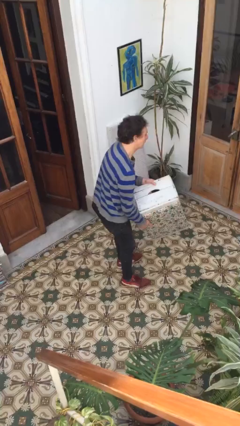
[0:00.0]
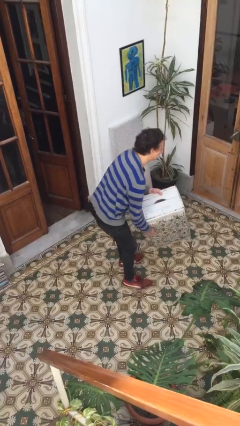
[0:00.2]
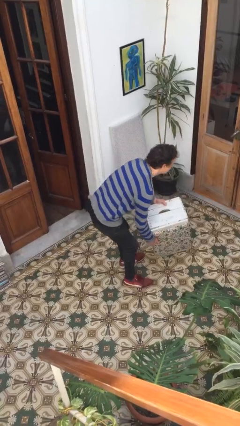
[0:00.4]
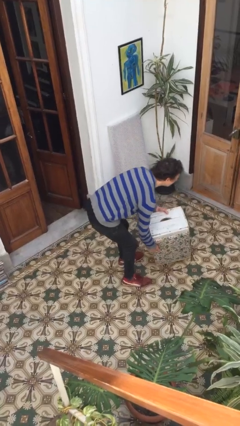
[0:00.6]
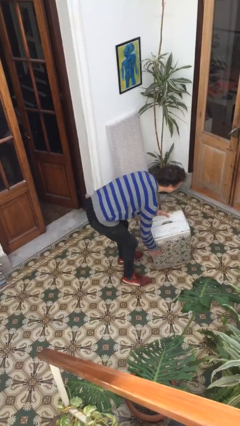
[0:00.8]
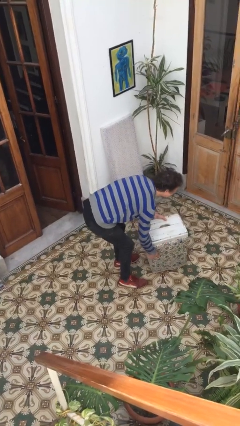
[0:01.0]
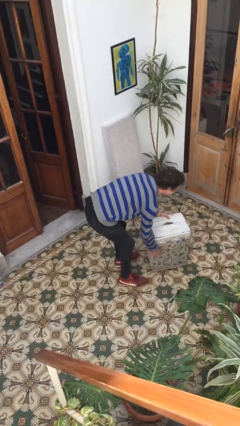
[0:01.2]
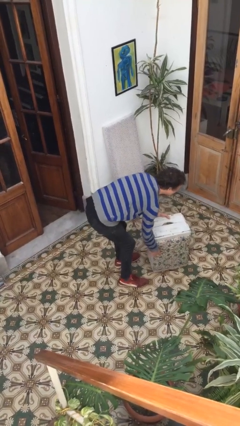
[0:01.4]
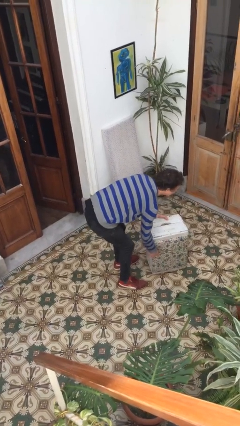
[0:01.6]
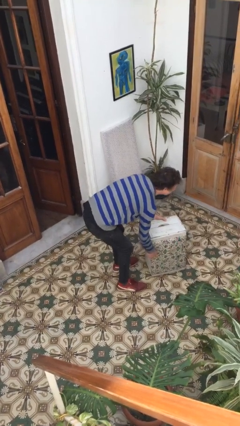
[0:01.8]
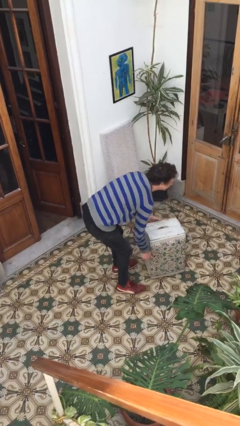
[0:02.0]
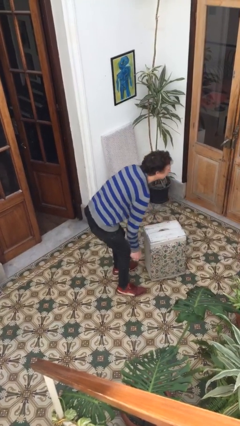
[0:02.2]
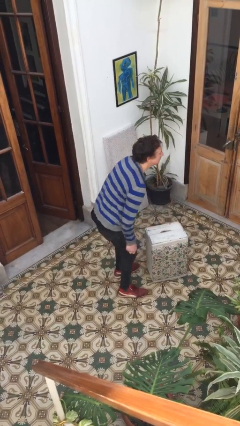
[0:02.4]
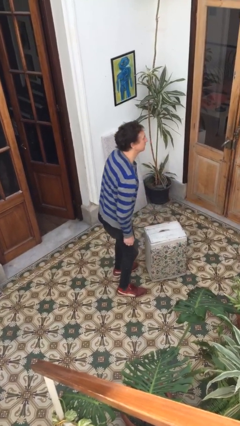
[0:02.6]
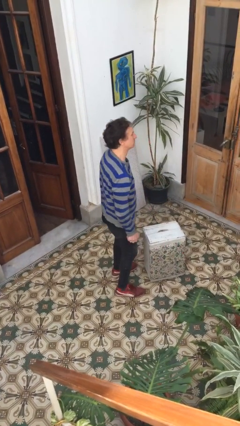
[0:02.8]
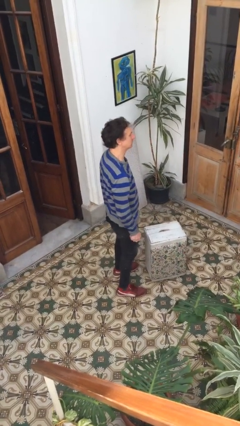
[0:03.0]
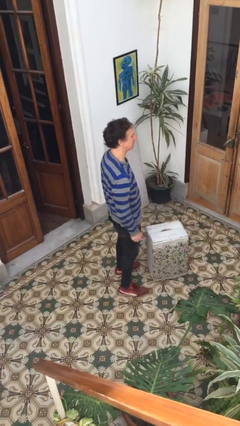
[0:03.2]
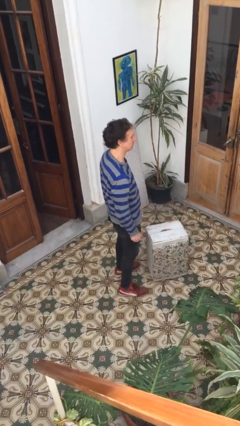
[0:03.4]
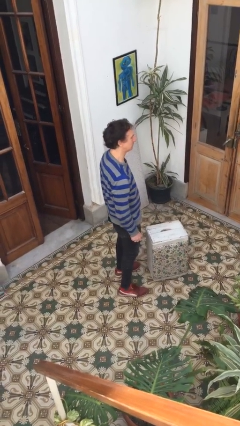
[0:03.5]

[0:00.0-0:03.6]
person puts down object on floor

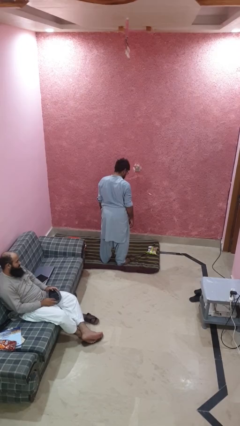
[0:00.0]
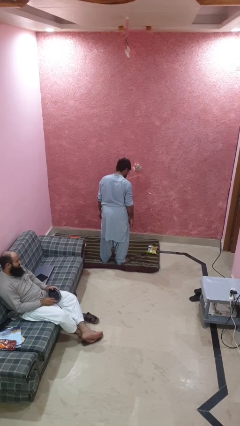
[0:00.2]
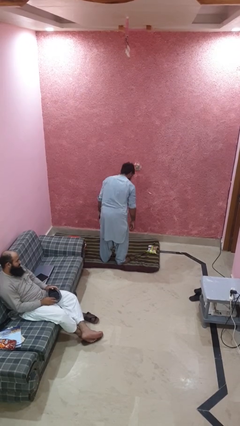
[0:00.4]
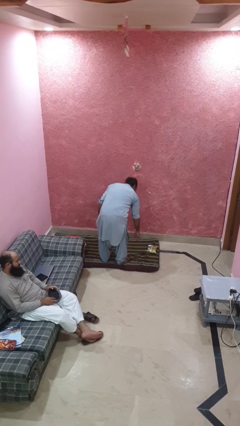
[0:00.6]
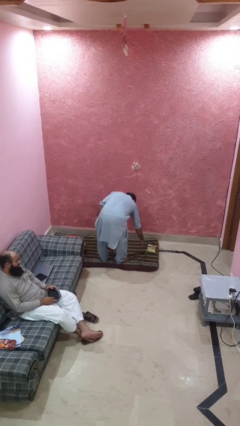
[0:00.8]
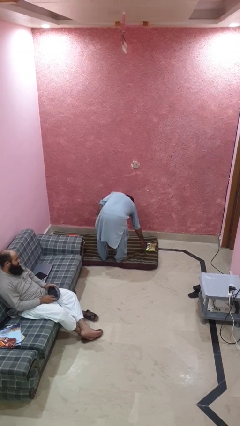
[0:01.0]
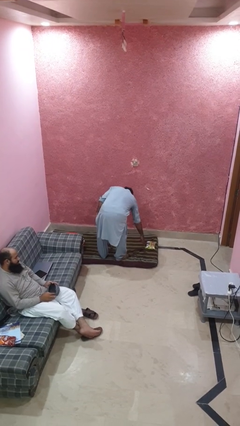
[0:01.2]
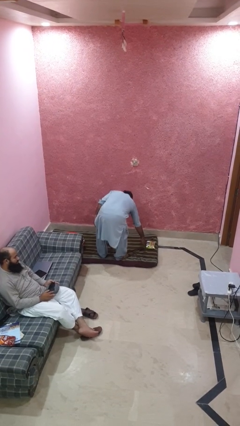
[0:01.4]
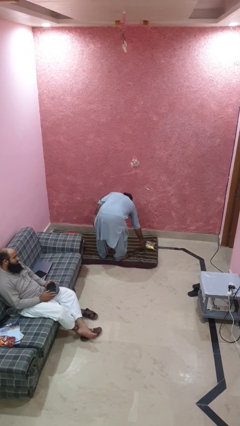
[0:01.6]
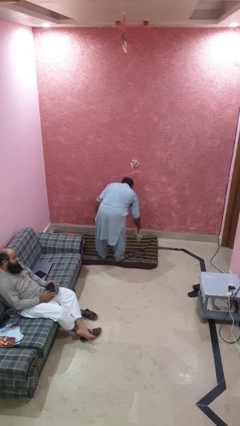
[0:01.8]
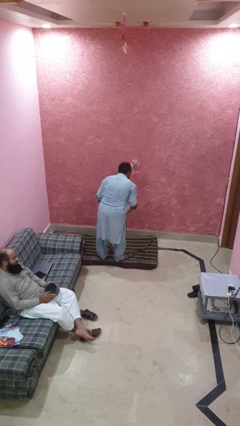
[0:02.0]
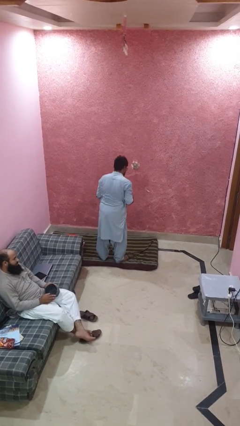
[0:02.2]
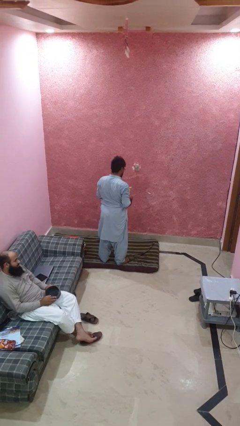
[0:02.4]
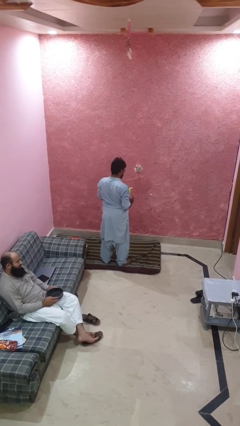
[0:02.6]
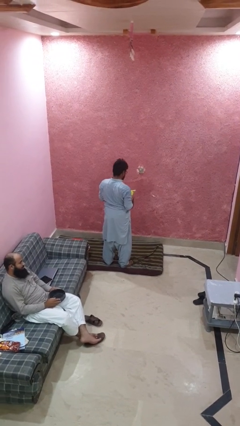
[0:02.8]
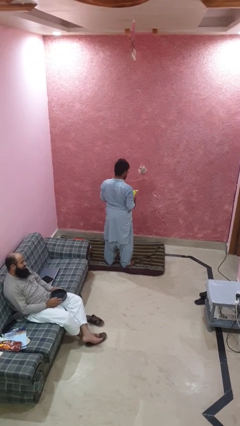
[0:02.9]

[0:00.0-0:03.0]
person picks up object from floor

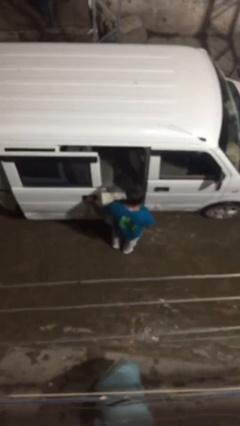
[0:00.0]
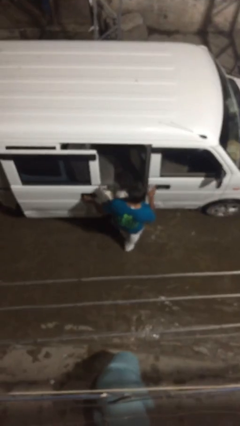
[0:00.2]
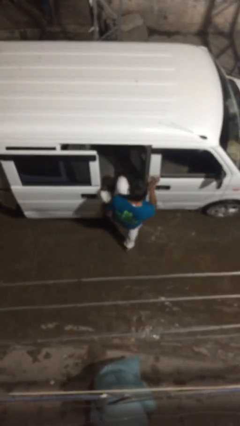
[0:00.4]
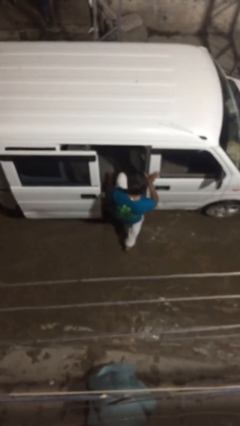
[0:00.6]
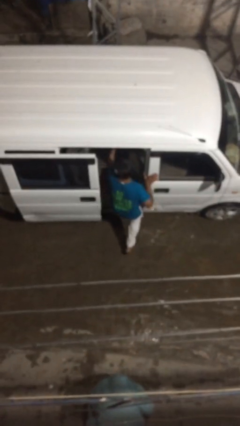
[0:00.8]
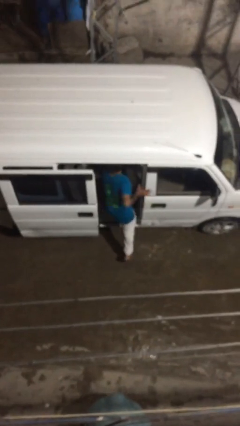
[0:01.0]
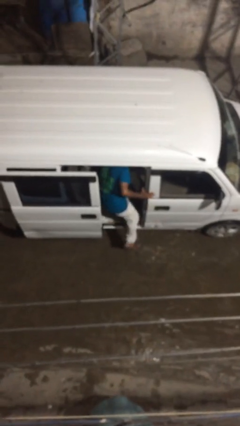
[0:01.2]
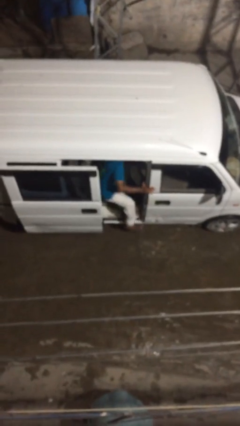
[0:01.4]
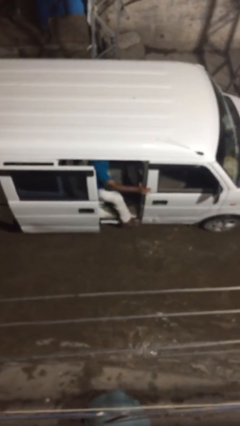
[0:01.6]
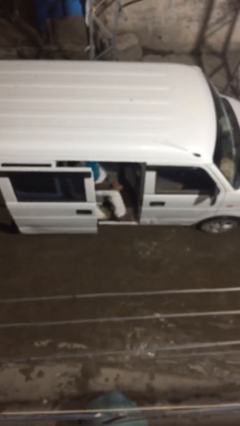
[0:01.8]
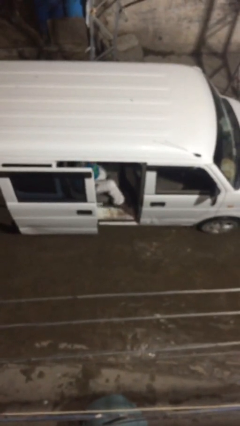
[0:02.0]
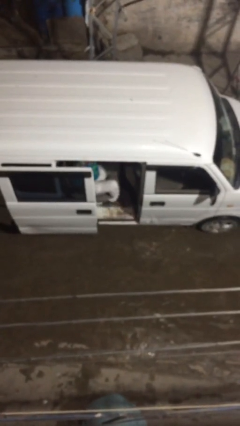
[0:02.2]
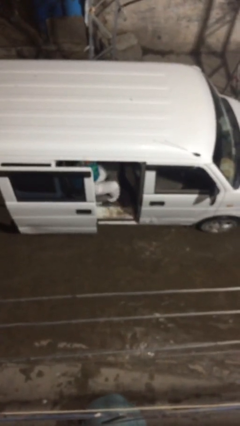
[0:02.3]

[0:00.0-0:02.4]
person enters car

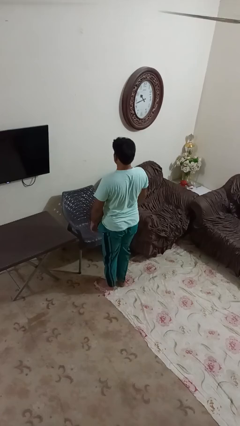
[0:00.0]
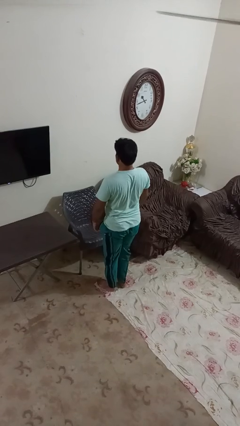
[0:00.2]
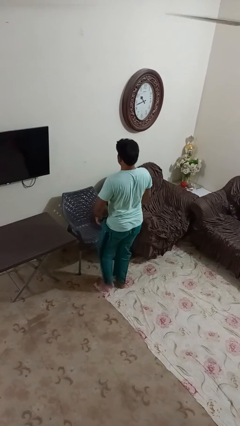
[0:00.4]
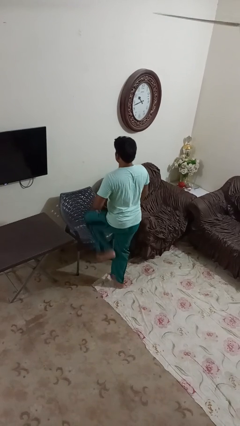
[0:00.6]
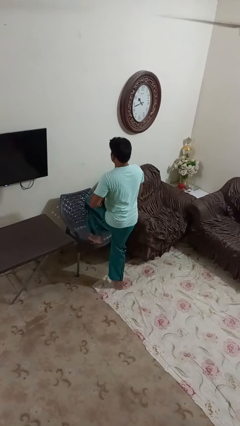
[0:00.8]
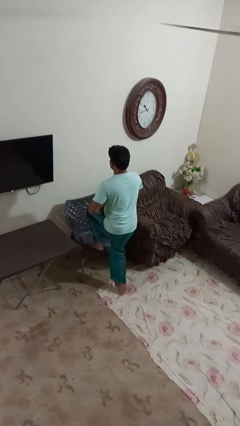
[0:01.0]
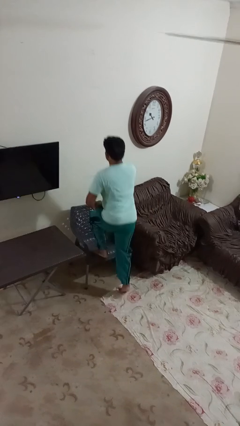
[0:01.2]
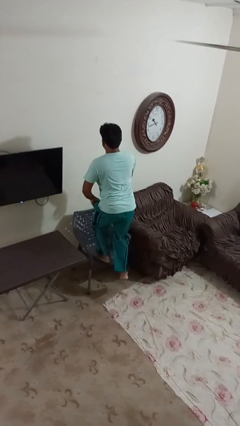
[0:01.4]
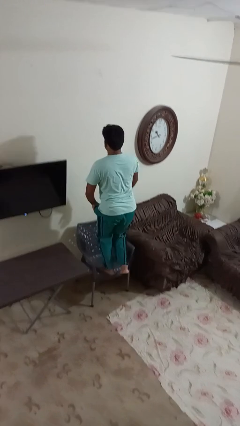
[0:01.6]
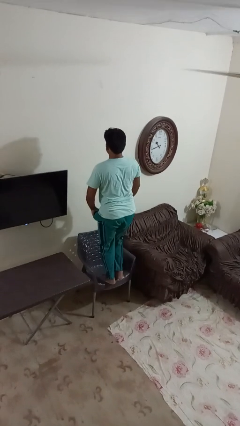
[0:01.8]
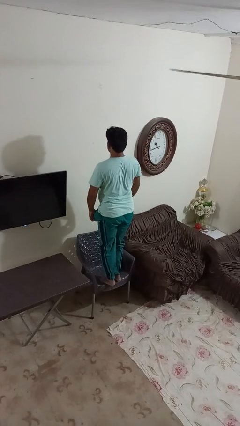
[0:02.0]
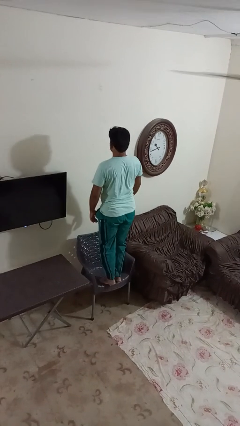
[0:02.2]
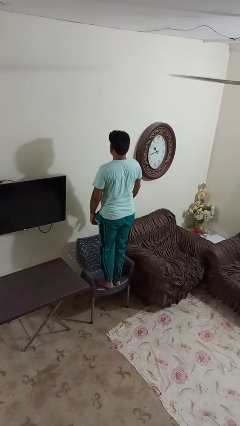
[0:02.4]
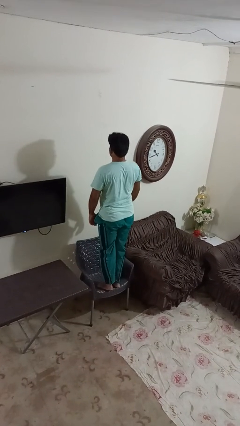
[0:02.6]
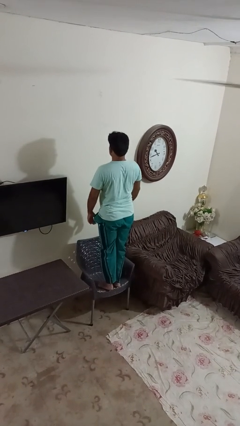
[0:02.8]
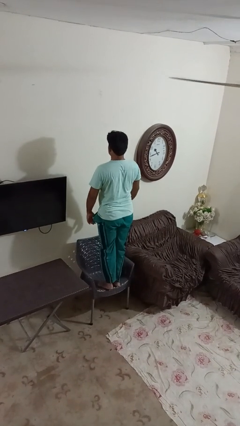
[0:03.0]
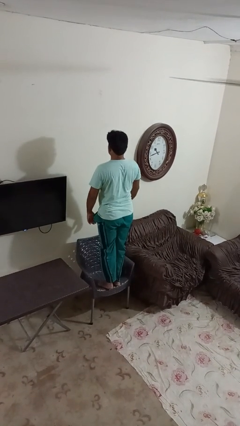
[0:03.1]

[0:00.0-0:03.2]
person climbs on chair

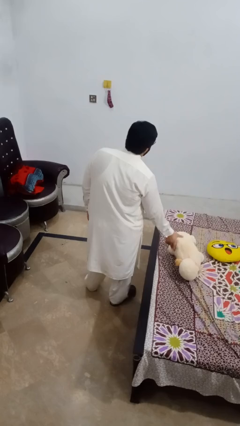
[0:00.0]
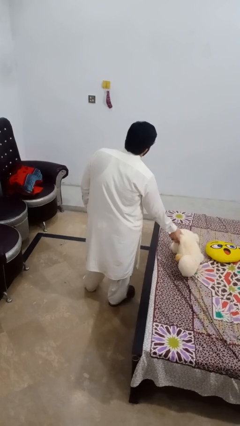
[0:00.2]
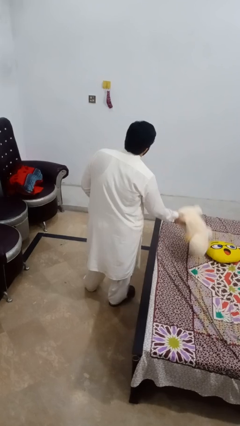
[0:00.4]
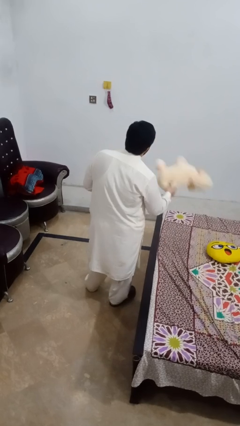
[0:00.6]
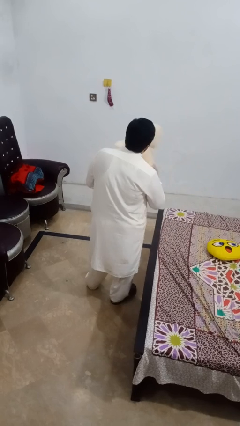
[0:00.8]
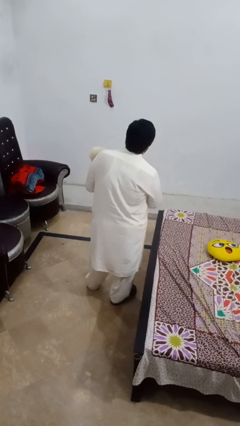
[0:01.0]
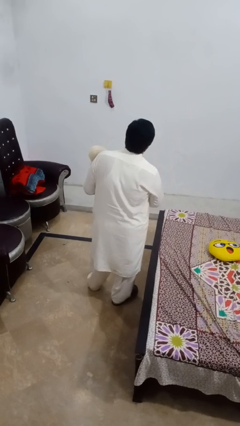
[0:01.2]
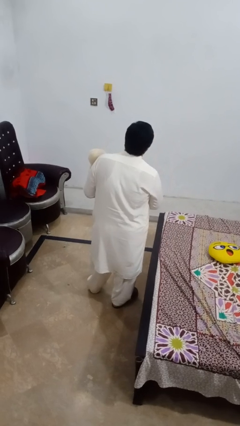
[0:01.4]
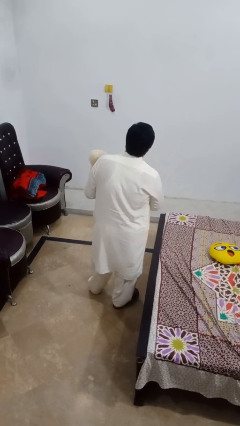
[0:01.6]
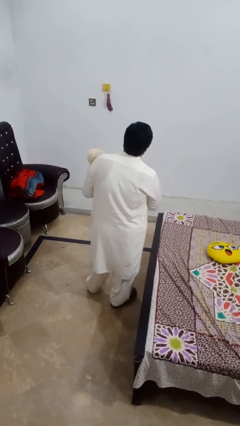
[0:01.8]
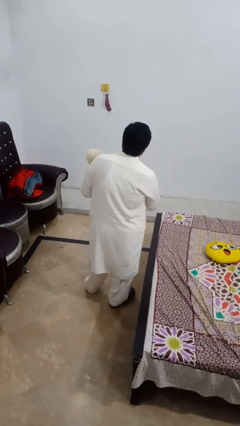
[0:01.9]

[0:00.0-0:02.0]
person picks up object from bed

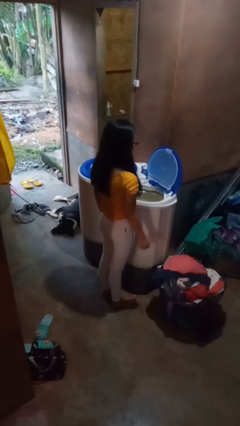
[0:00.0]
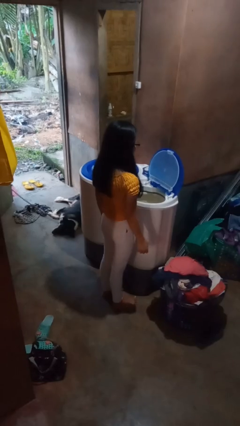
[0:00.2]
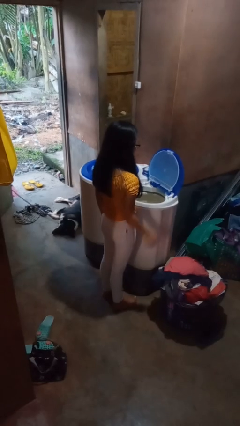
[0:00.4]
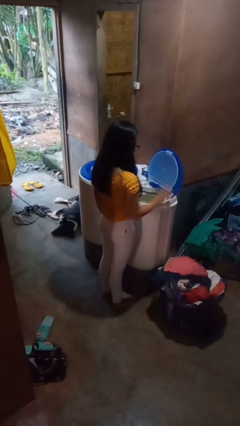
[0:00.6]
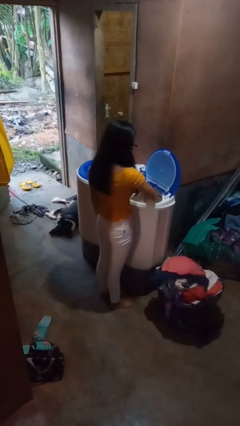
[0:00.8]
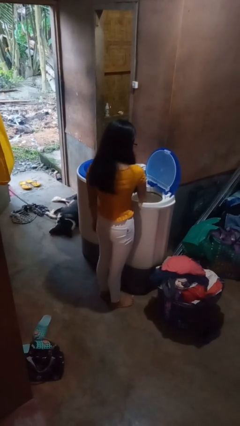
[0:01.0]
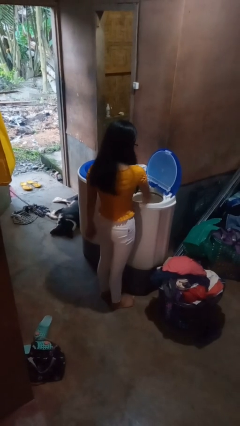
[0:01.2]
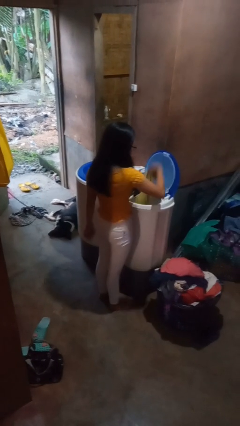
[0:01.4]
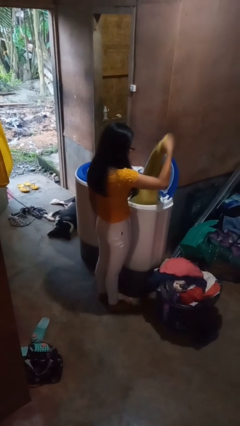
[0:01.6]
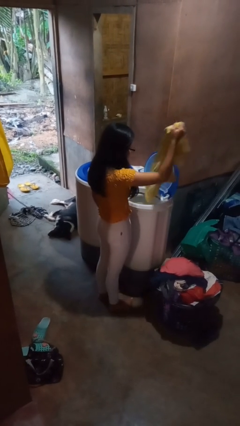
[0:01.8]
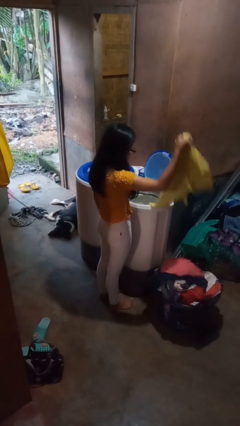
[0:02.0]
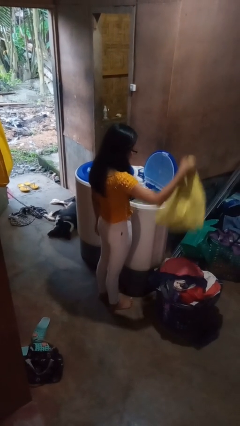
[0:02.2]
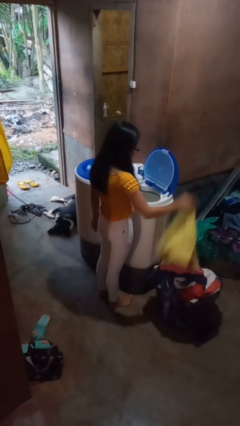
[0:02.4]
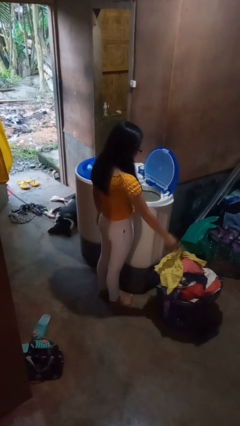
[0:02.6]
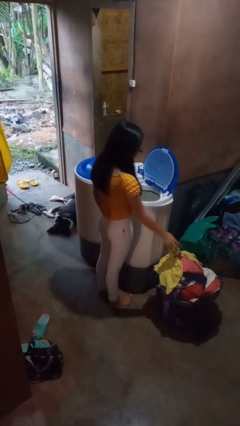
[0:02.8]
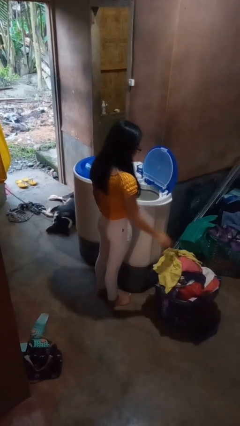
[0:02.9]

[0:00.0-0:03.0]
person unloads dryer

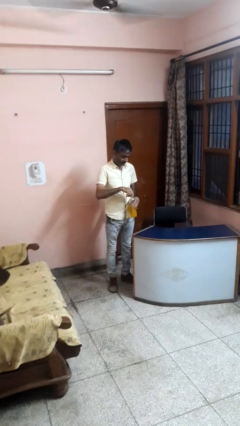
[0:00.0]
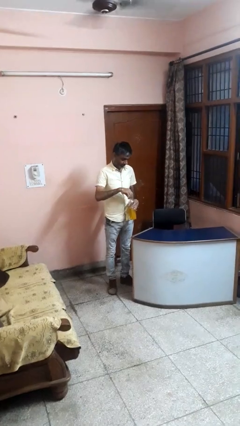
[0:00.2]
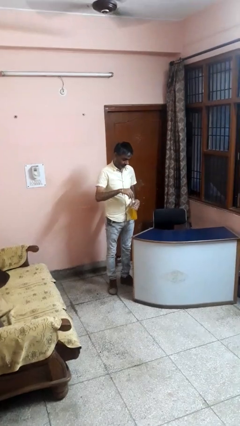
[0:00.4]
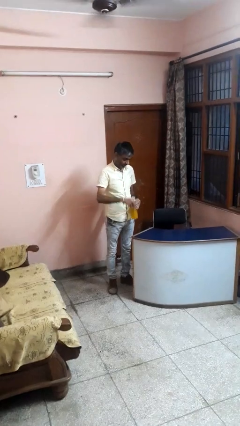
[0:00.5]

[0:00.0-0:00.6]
person unscrews lid from bottle
